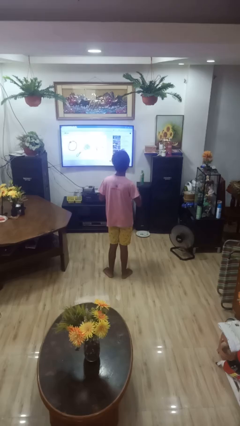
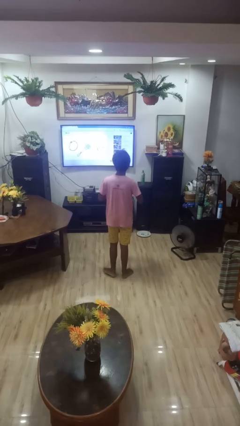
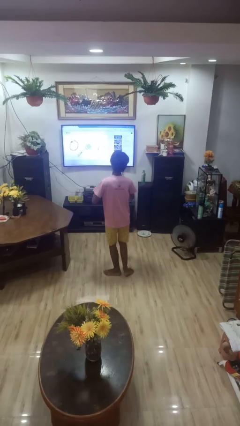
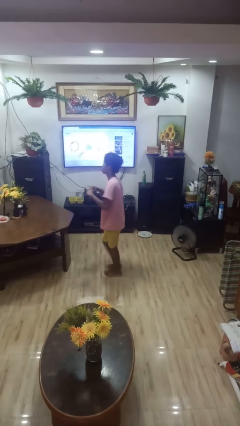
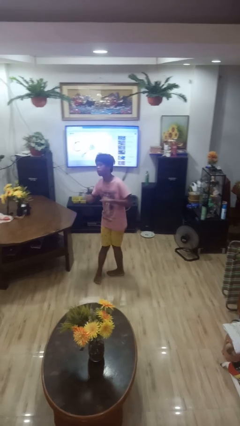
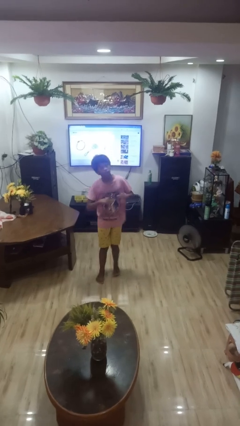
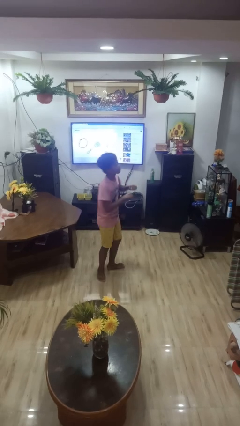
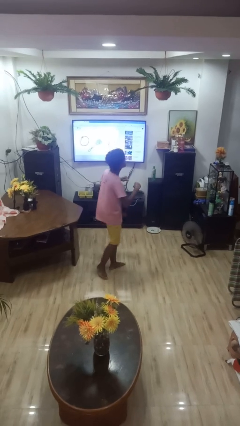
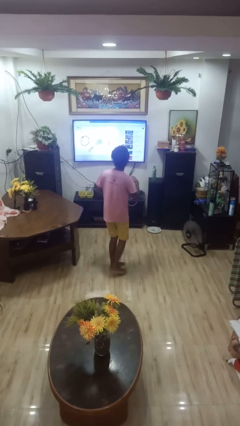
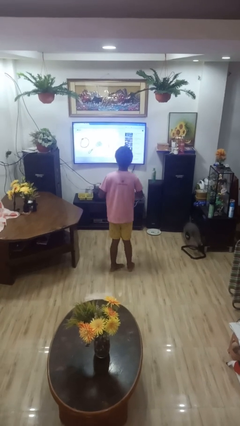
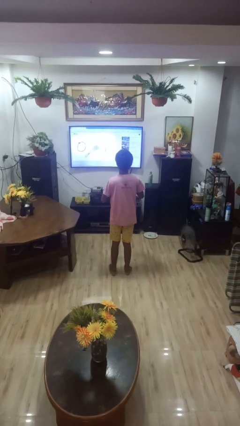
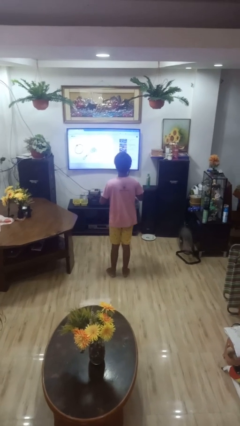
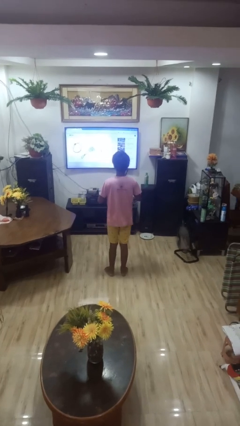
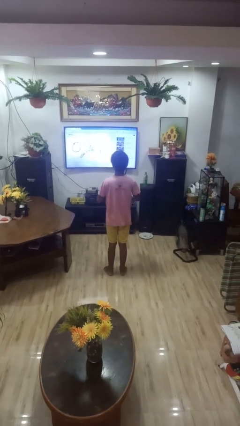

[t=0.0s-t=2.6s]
person twirls

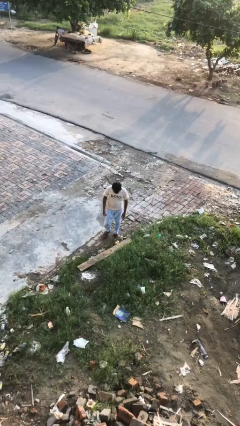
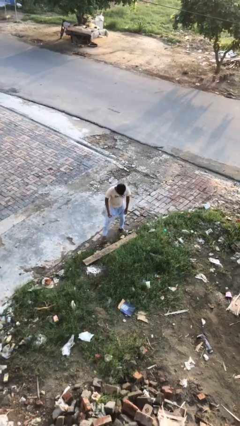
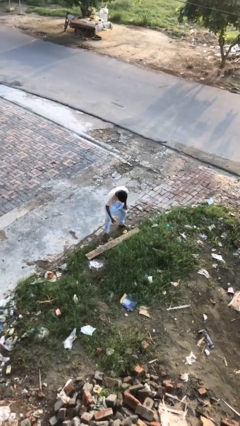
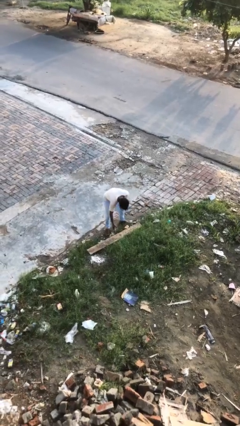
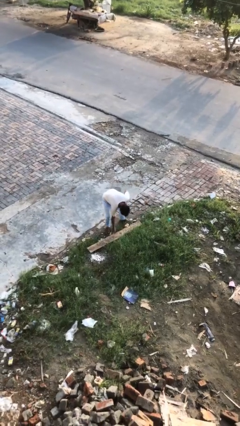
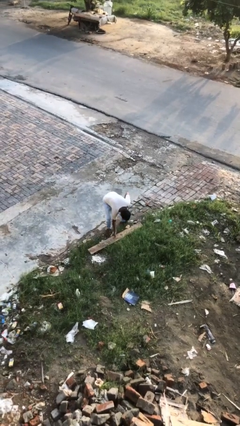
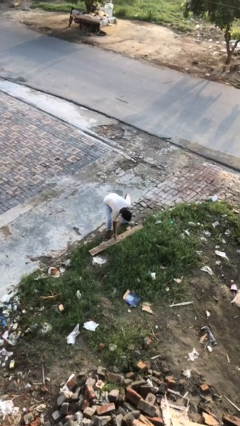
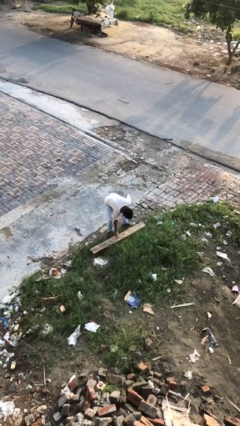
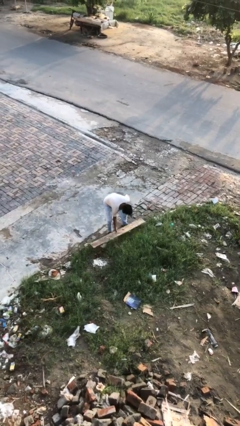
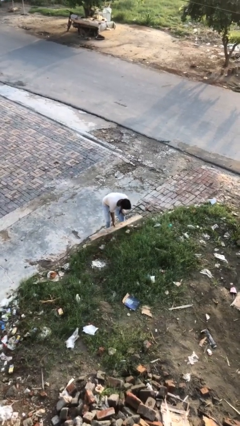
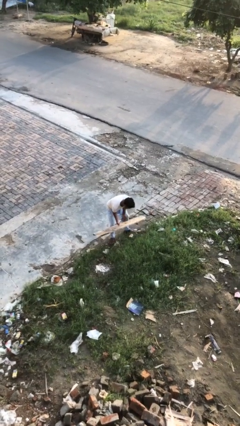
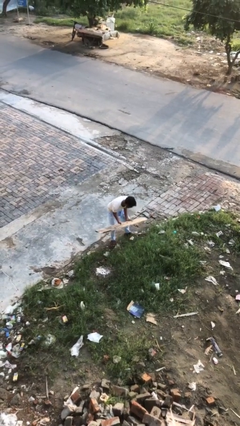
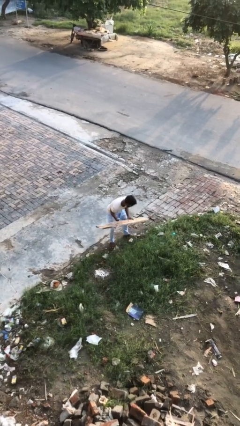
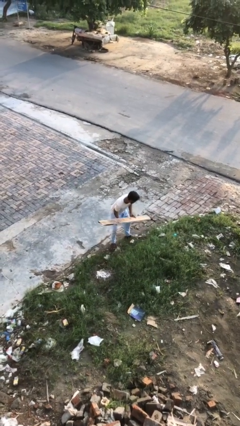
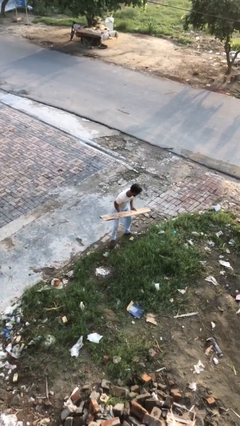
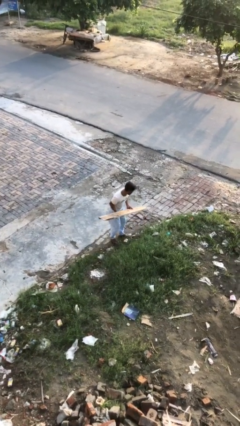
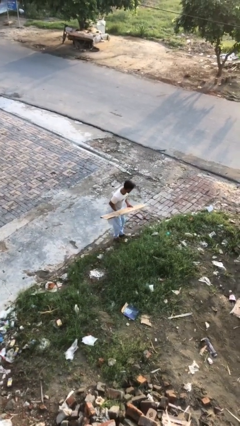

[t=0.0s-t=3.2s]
person picks up object from floor

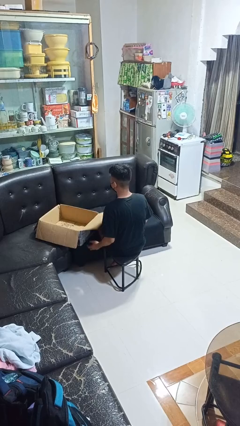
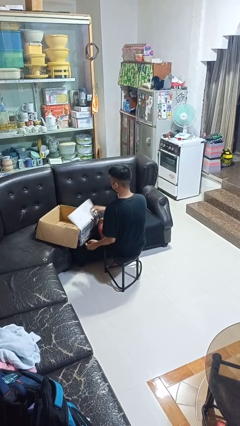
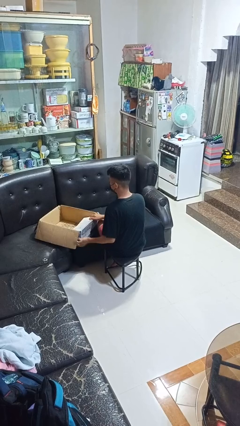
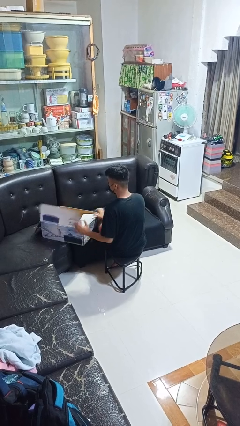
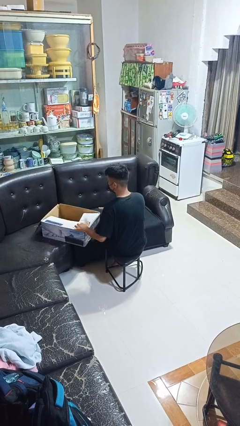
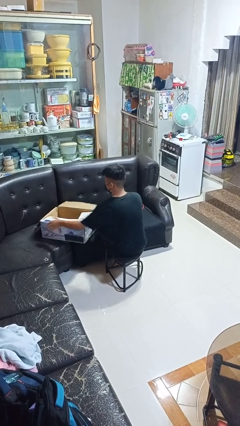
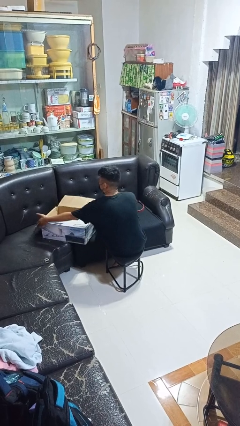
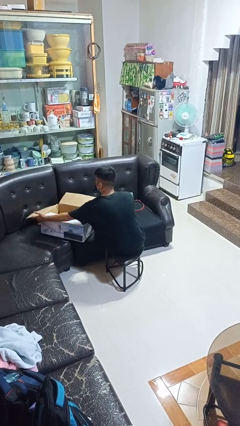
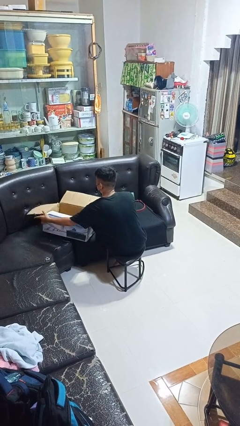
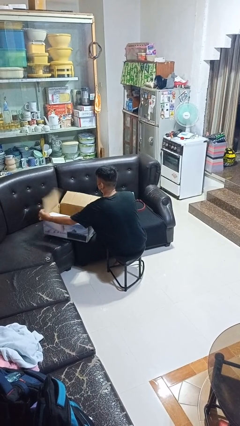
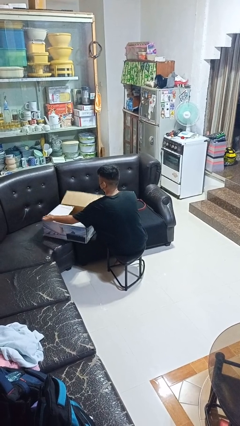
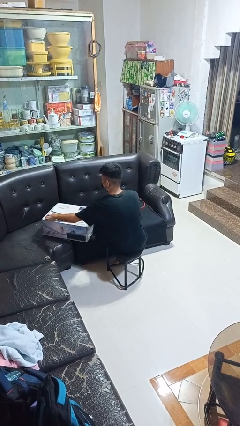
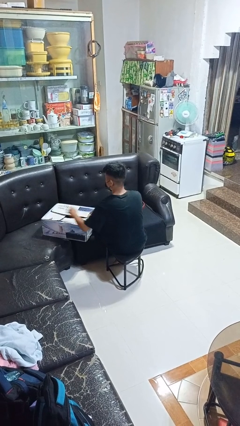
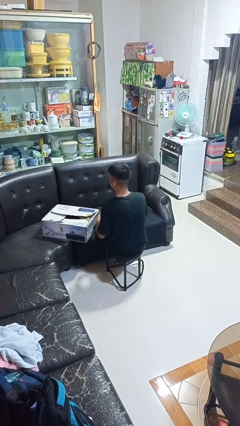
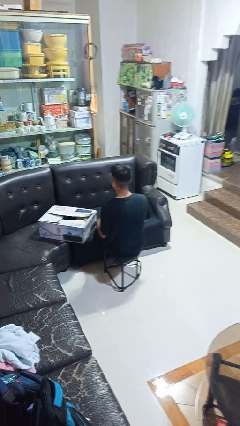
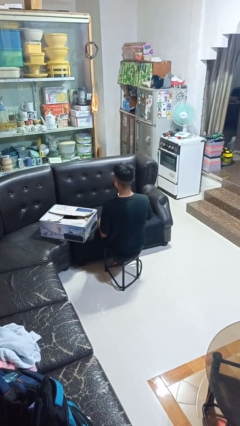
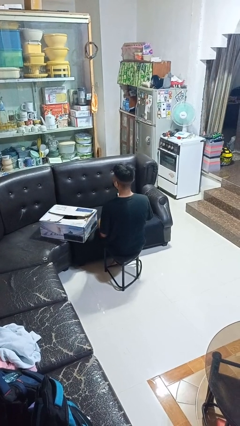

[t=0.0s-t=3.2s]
person closes box

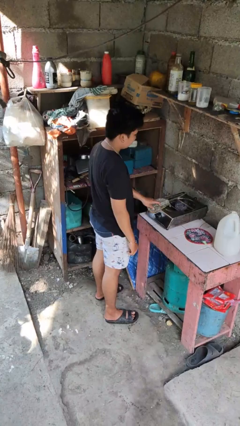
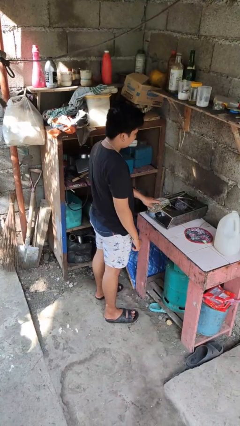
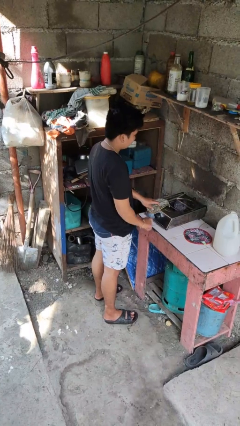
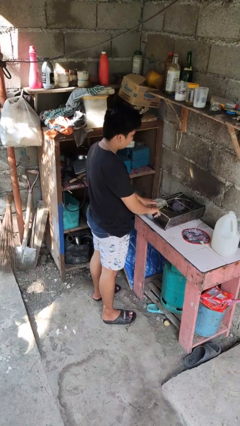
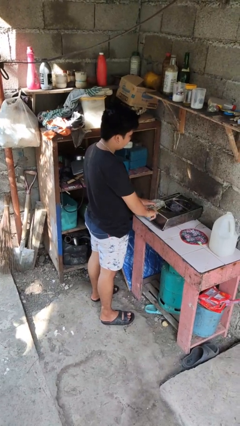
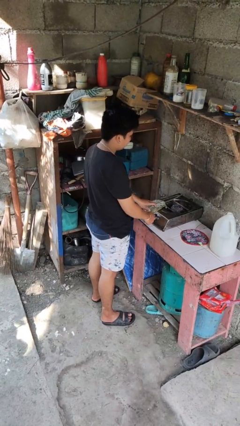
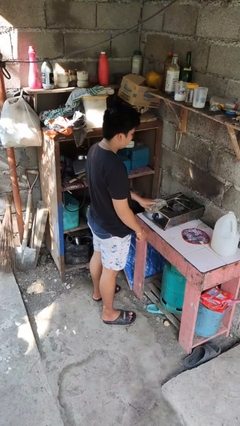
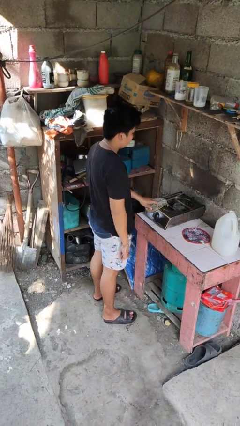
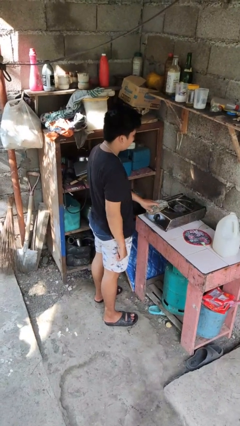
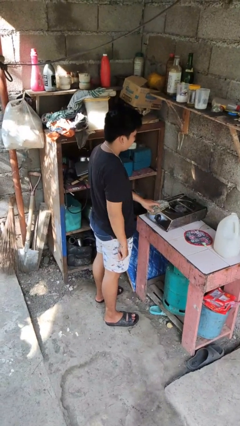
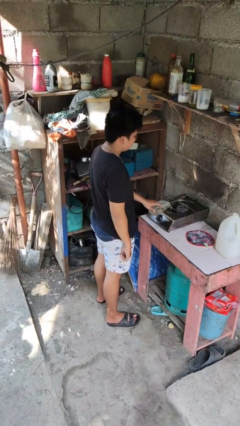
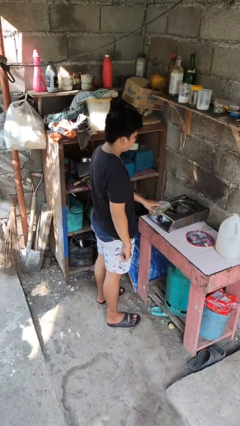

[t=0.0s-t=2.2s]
person turns off stovetop

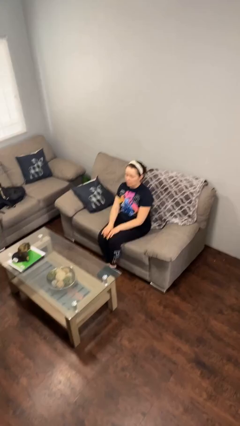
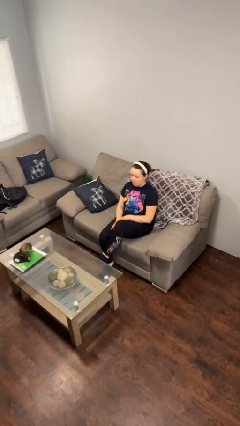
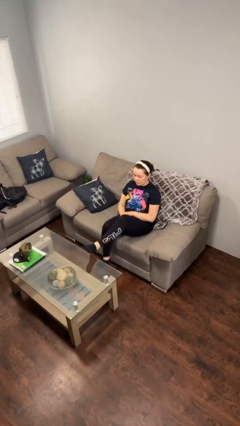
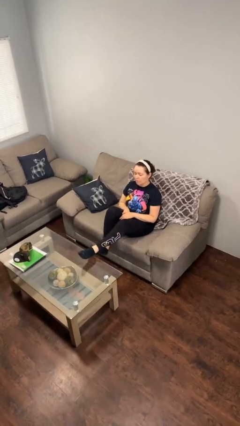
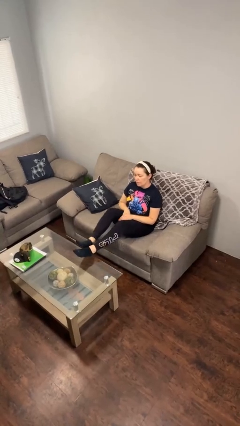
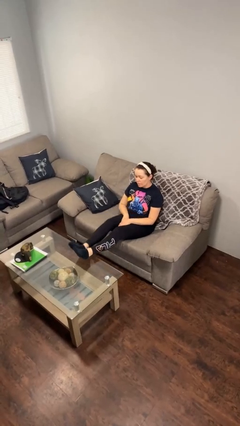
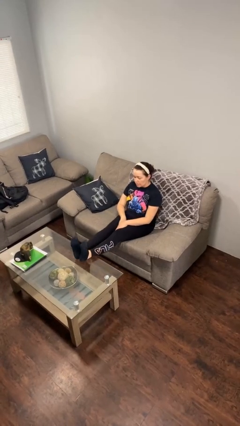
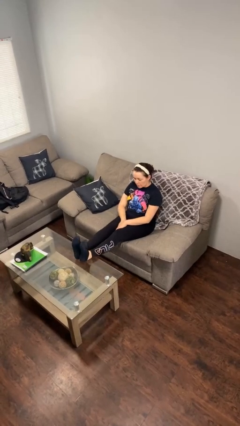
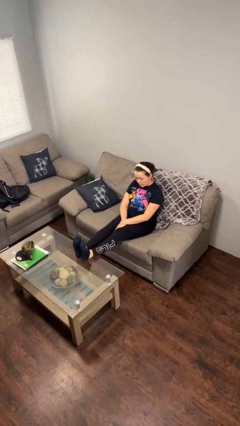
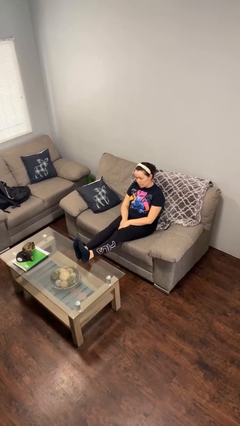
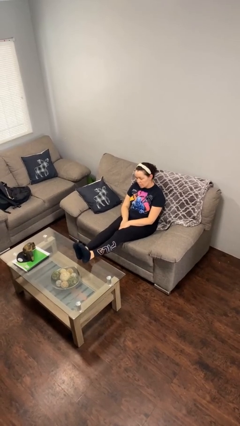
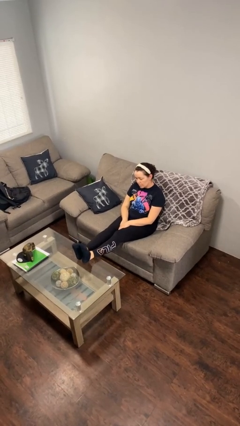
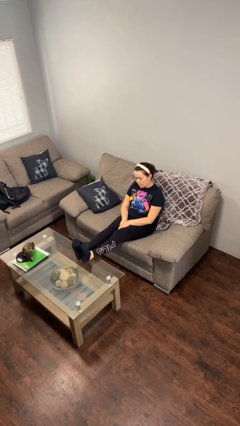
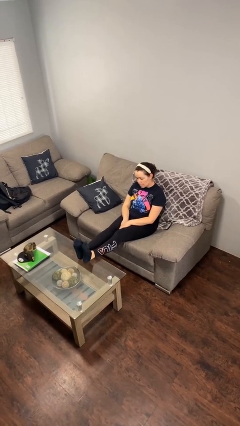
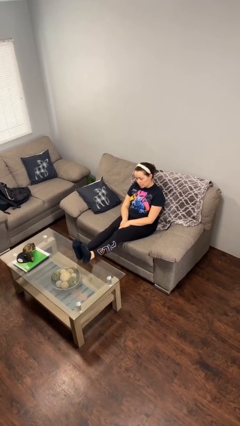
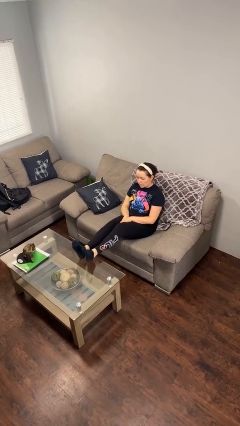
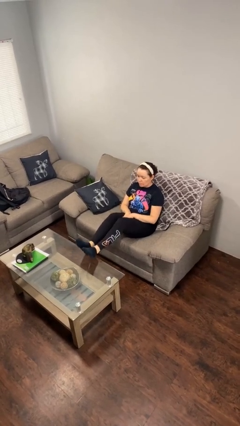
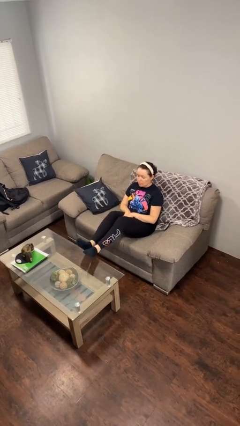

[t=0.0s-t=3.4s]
person puts feet up

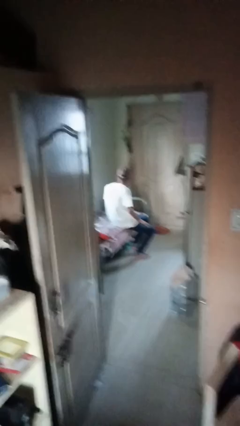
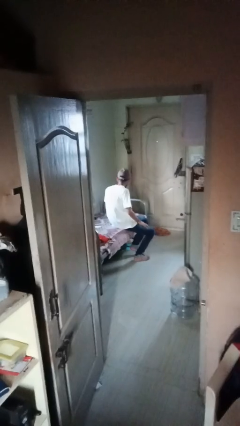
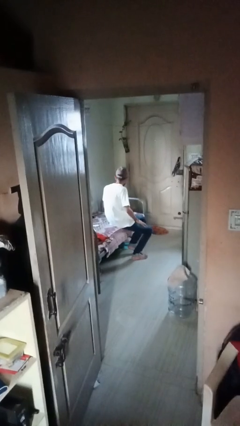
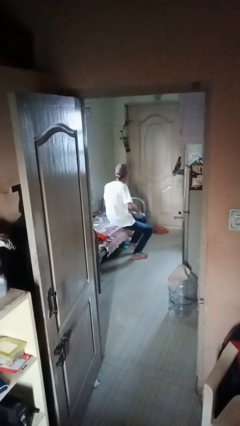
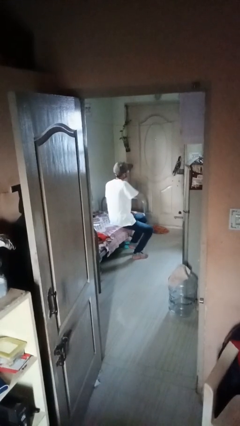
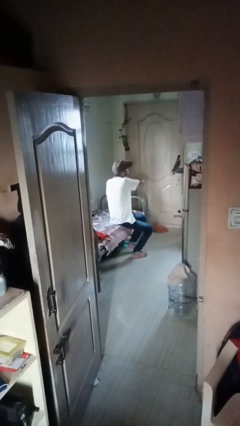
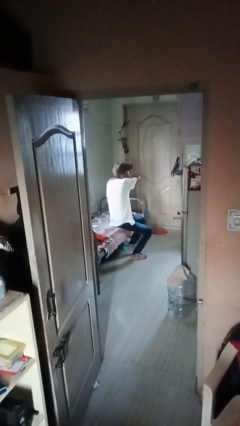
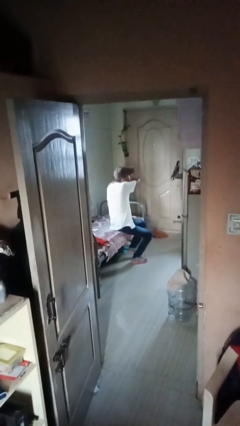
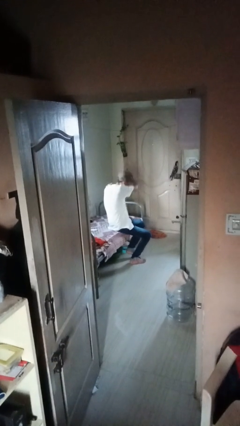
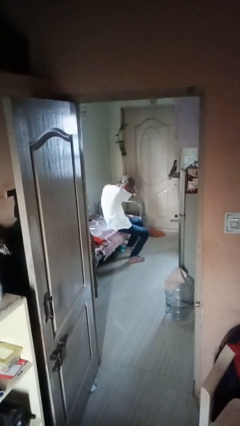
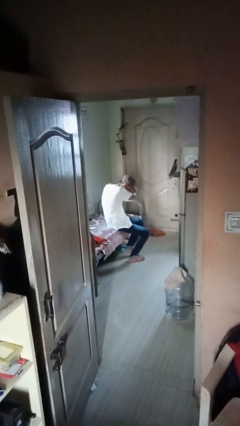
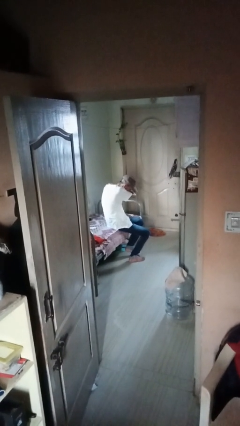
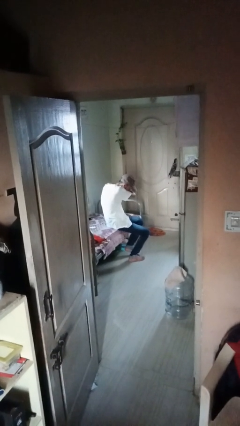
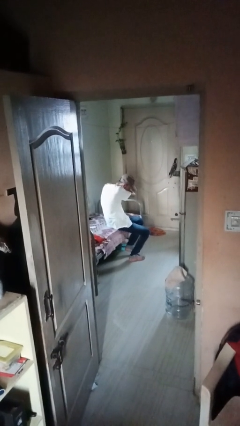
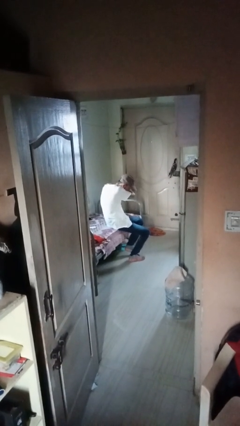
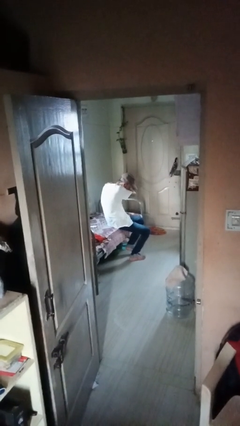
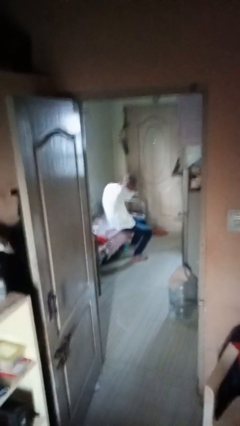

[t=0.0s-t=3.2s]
person sneezes into arm
